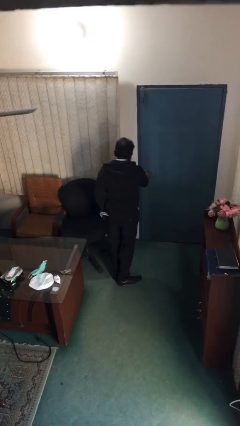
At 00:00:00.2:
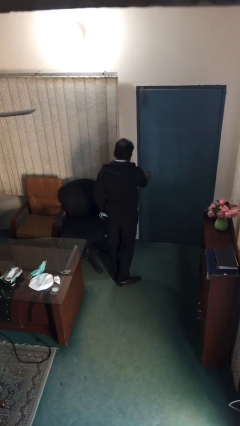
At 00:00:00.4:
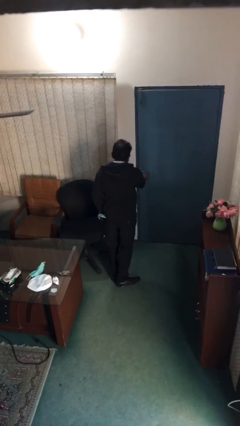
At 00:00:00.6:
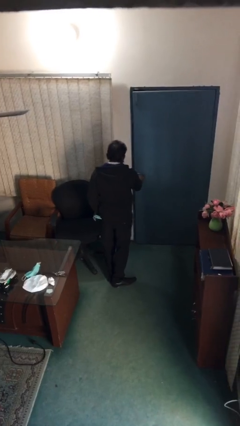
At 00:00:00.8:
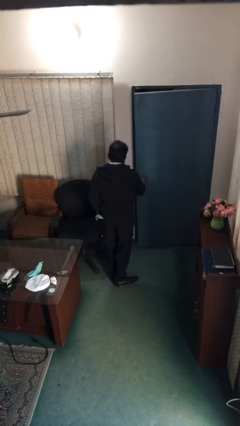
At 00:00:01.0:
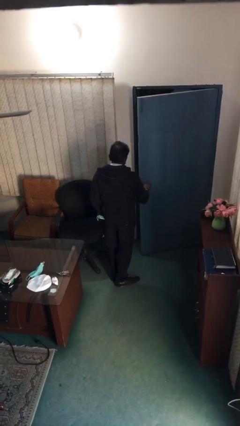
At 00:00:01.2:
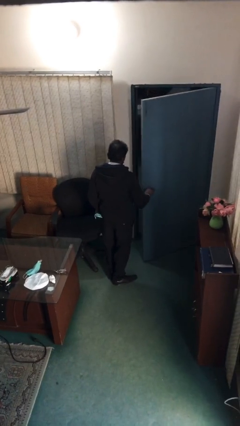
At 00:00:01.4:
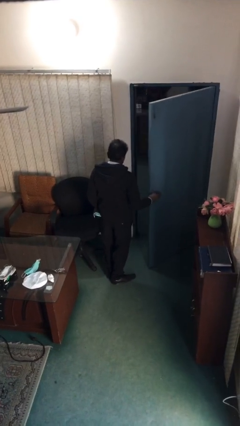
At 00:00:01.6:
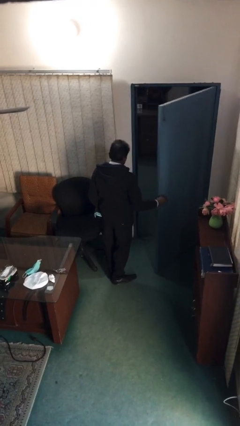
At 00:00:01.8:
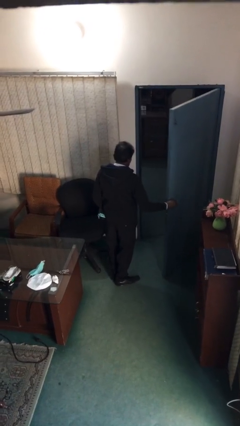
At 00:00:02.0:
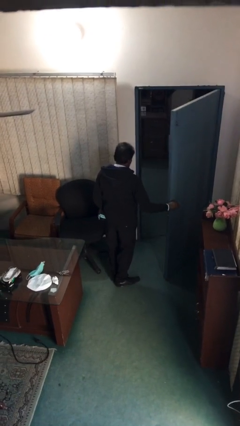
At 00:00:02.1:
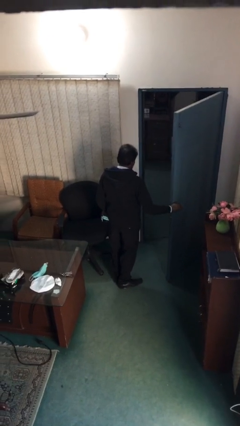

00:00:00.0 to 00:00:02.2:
person opens facility door

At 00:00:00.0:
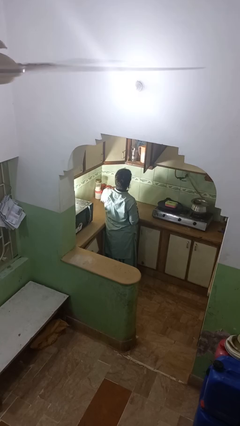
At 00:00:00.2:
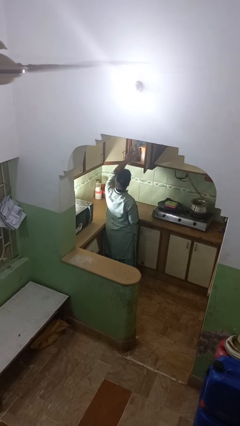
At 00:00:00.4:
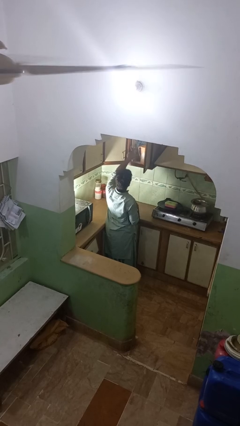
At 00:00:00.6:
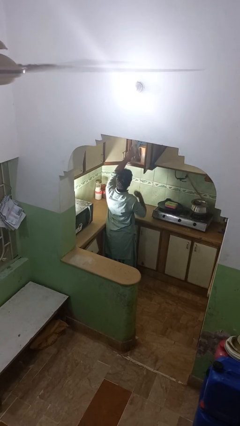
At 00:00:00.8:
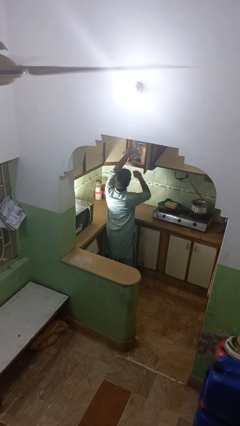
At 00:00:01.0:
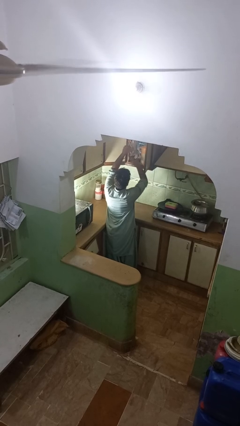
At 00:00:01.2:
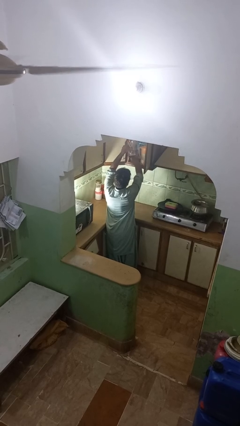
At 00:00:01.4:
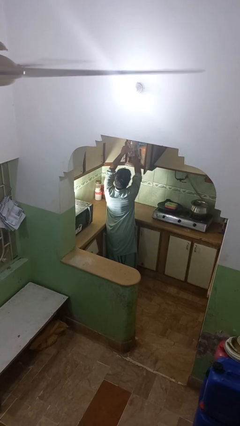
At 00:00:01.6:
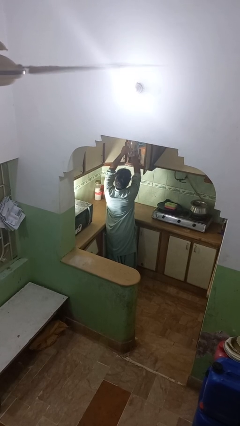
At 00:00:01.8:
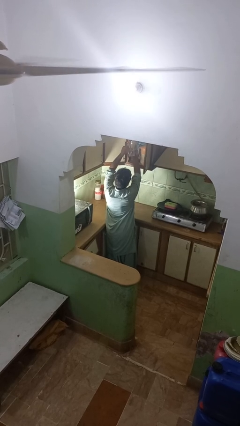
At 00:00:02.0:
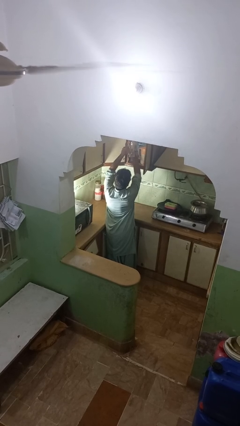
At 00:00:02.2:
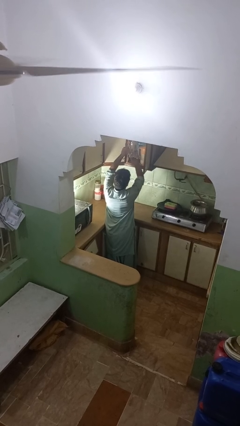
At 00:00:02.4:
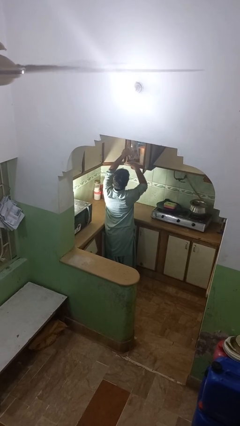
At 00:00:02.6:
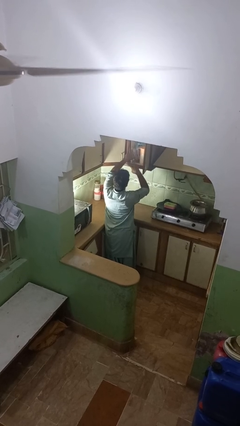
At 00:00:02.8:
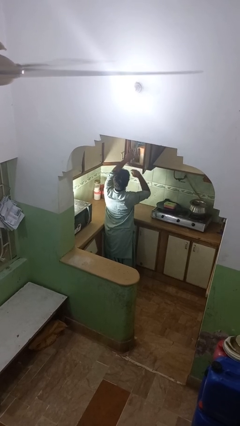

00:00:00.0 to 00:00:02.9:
person searches in kitchen drawer

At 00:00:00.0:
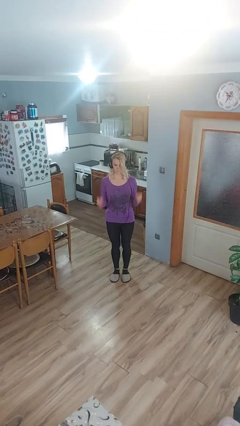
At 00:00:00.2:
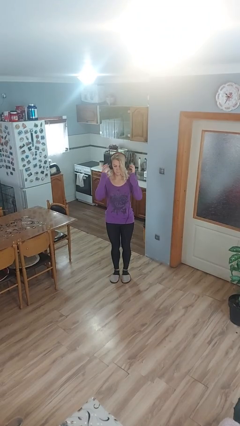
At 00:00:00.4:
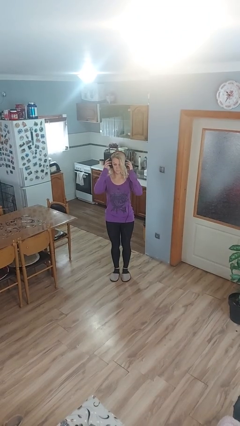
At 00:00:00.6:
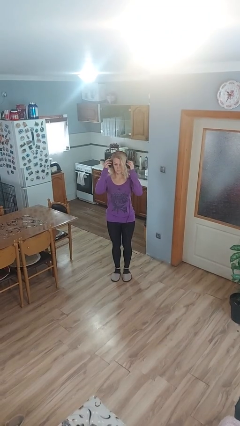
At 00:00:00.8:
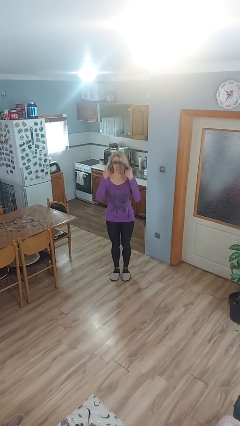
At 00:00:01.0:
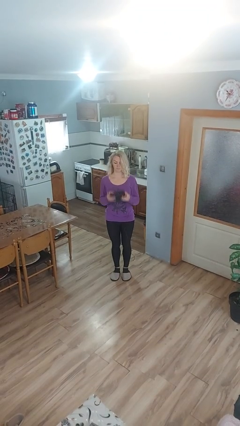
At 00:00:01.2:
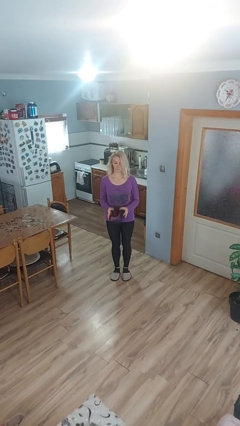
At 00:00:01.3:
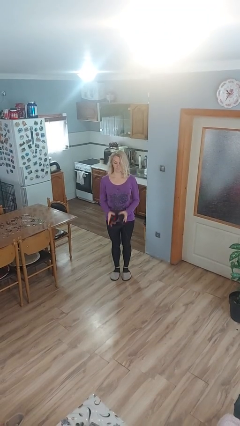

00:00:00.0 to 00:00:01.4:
person takes off headphones

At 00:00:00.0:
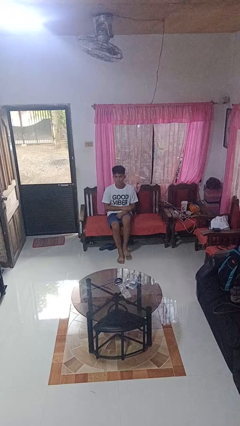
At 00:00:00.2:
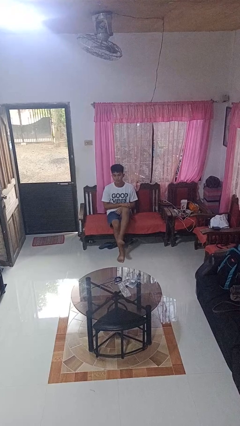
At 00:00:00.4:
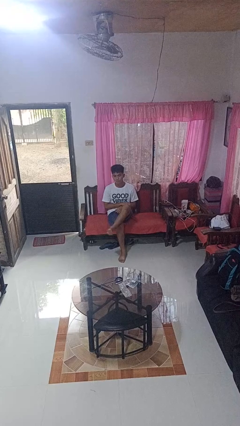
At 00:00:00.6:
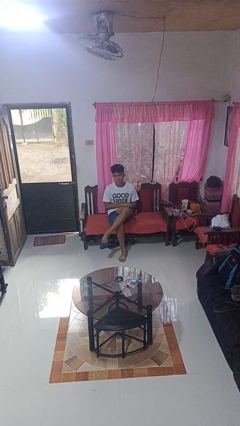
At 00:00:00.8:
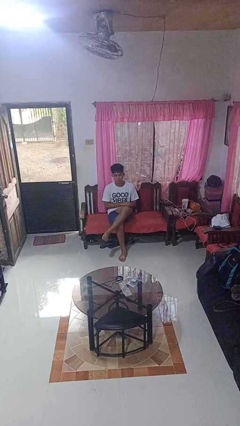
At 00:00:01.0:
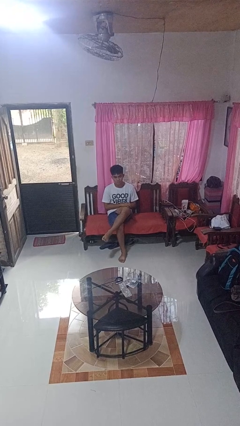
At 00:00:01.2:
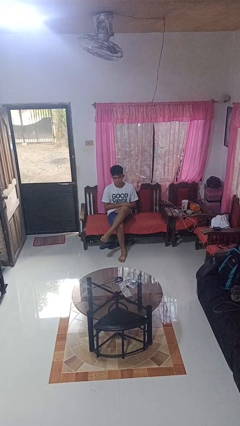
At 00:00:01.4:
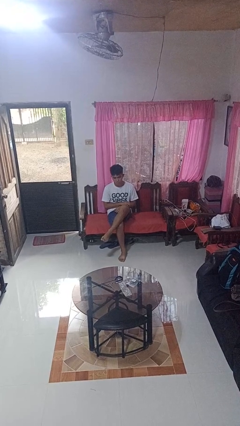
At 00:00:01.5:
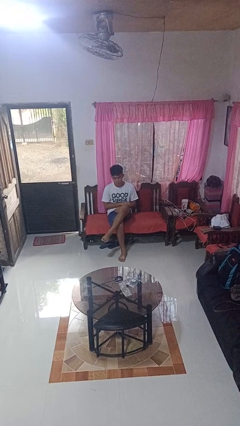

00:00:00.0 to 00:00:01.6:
person crosses legs

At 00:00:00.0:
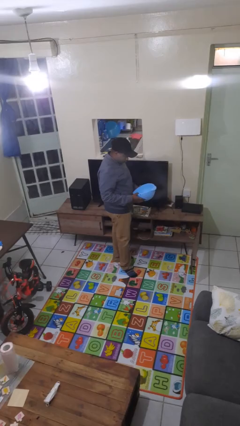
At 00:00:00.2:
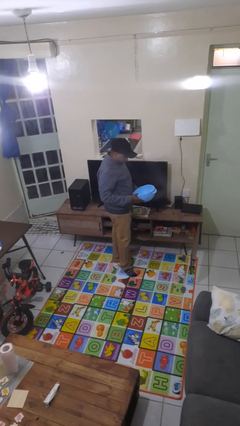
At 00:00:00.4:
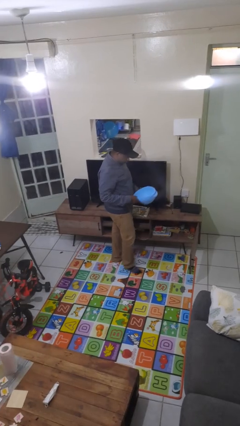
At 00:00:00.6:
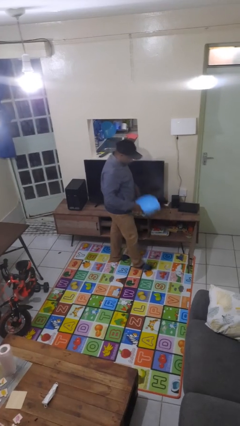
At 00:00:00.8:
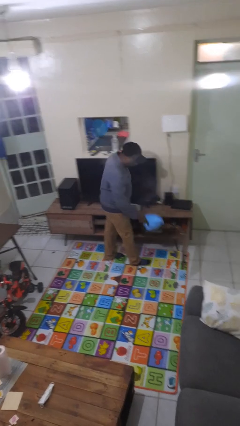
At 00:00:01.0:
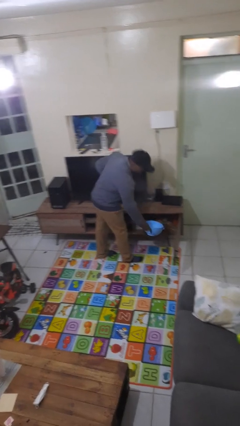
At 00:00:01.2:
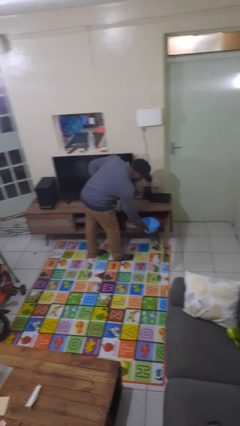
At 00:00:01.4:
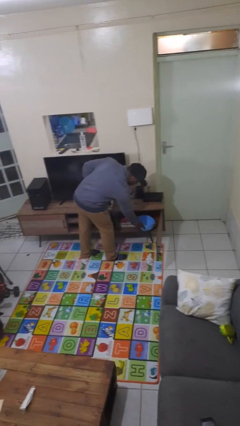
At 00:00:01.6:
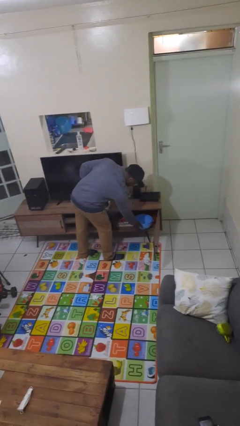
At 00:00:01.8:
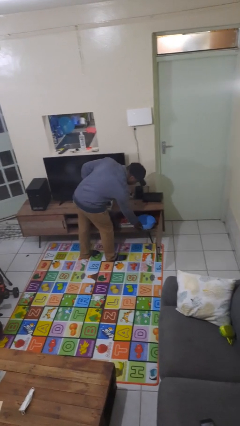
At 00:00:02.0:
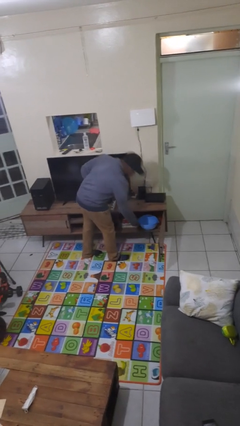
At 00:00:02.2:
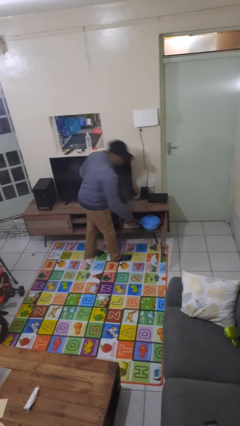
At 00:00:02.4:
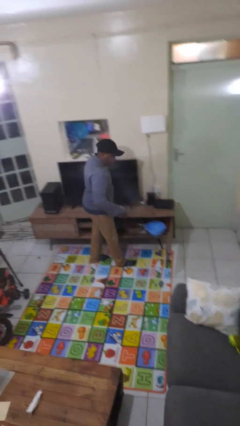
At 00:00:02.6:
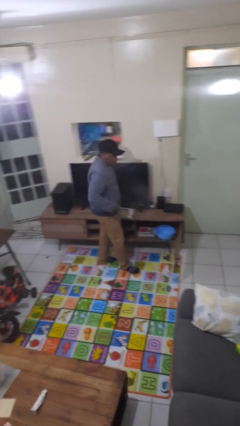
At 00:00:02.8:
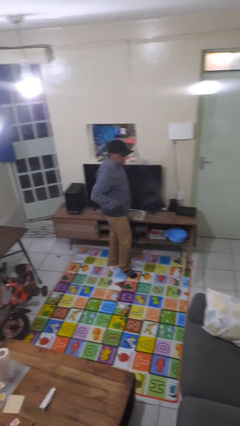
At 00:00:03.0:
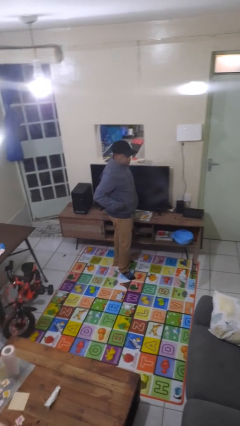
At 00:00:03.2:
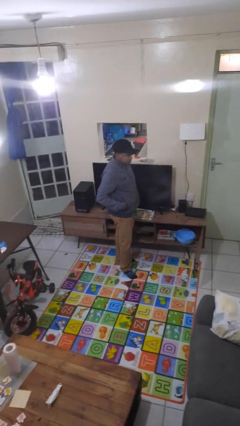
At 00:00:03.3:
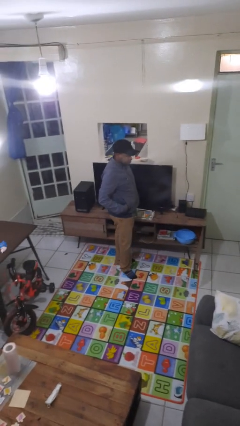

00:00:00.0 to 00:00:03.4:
person puts down object into cabinet

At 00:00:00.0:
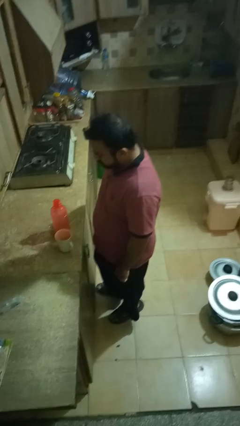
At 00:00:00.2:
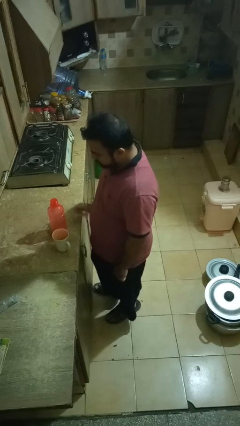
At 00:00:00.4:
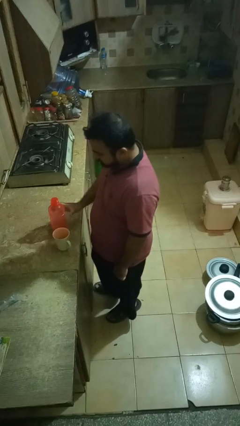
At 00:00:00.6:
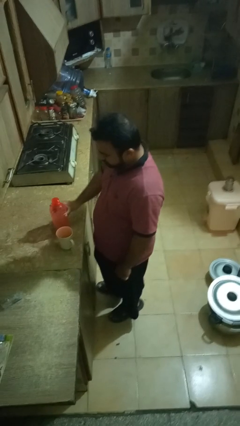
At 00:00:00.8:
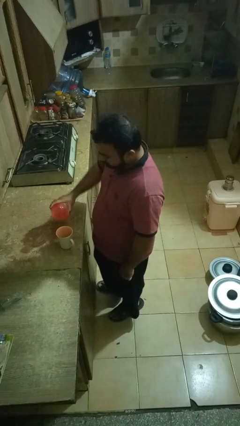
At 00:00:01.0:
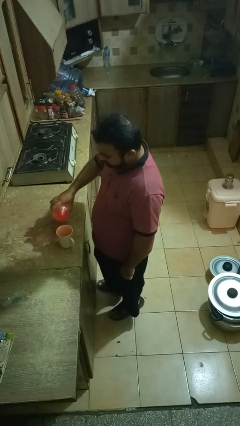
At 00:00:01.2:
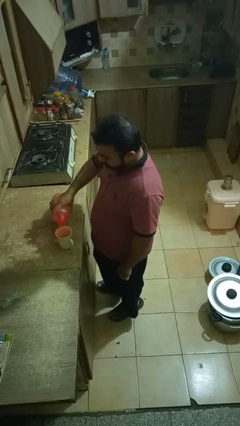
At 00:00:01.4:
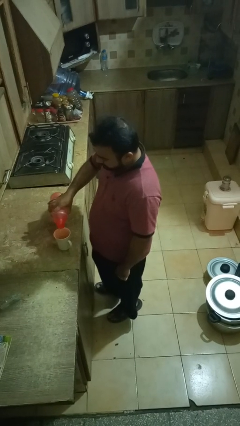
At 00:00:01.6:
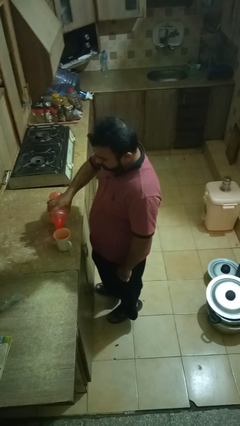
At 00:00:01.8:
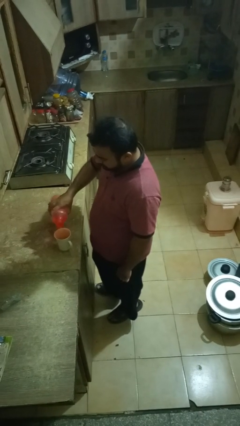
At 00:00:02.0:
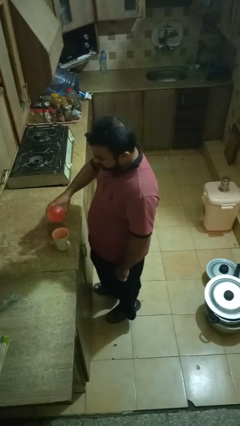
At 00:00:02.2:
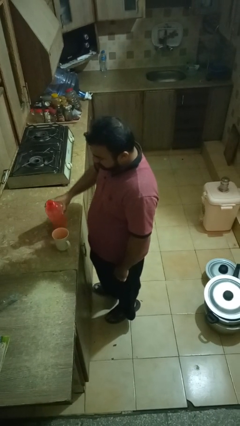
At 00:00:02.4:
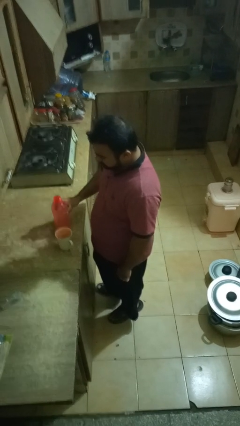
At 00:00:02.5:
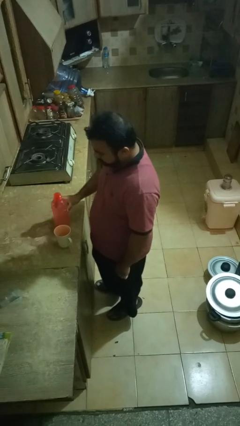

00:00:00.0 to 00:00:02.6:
person pours liquid into cup

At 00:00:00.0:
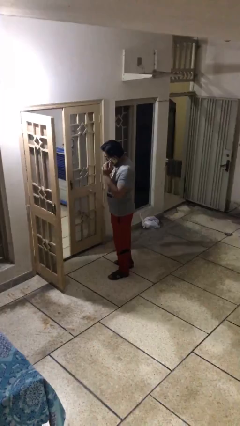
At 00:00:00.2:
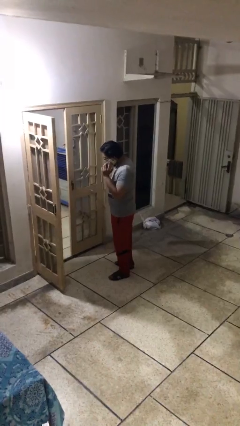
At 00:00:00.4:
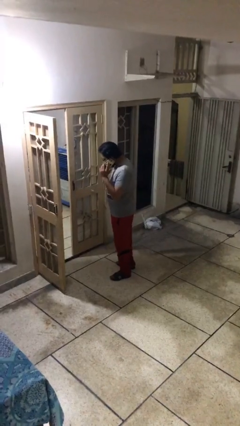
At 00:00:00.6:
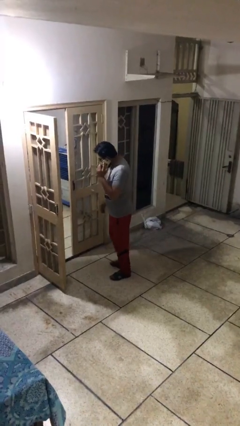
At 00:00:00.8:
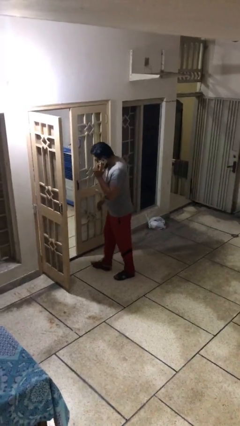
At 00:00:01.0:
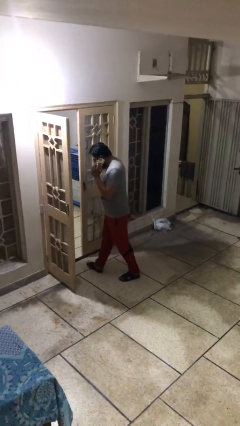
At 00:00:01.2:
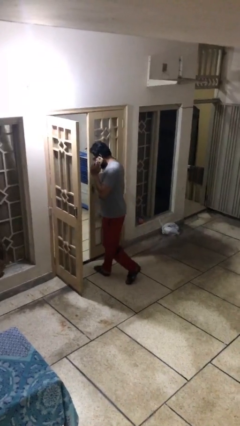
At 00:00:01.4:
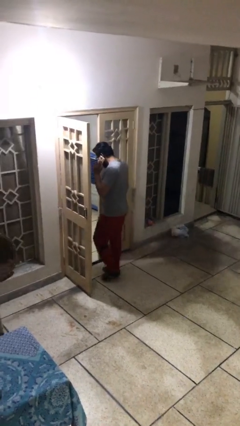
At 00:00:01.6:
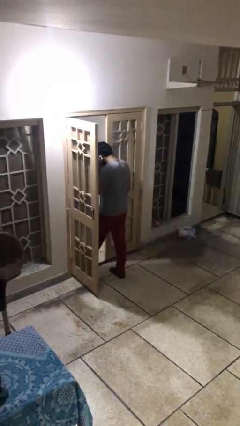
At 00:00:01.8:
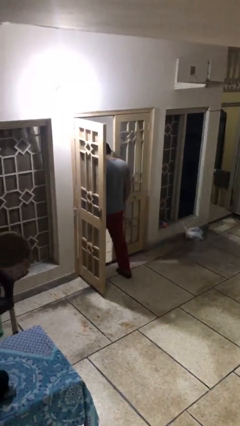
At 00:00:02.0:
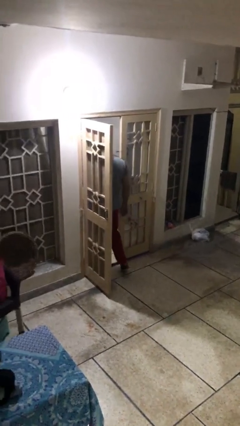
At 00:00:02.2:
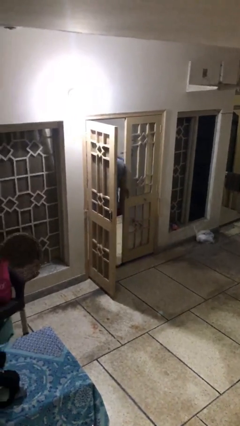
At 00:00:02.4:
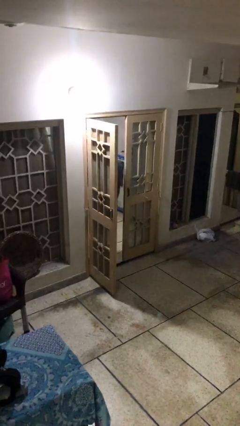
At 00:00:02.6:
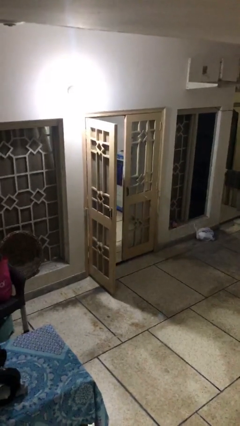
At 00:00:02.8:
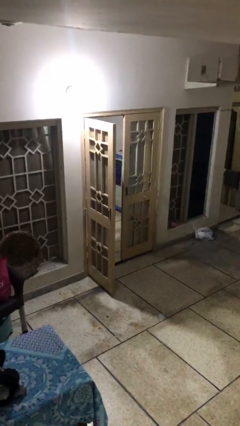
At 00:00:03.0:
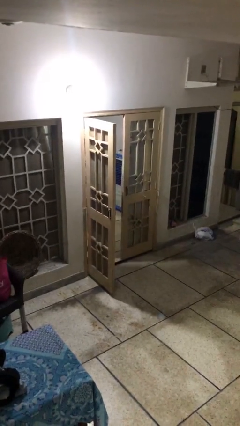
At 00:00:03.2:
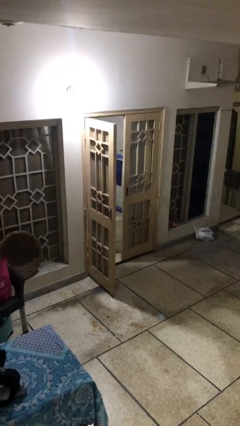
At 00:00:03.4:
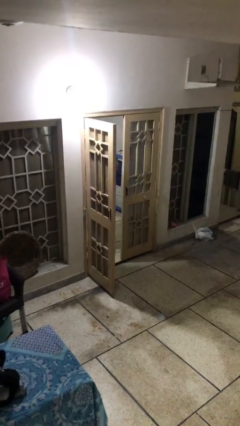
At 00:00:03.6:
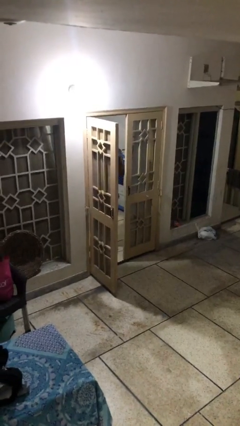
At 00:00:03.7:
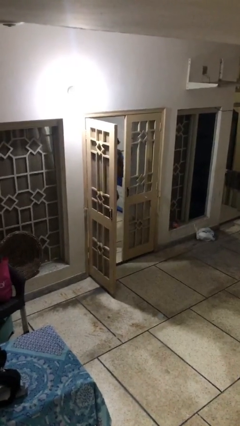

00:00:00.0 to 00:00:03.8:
person exits scene through structure
